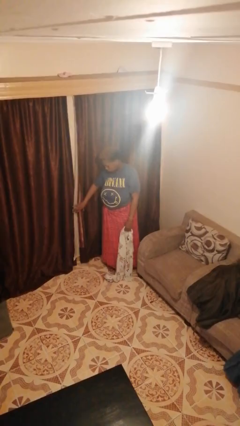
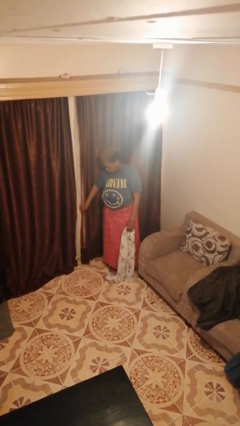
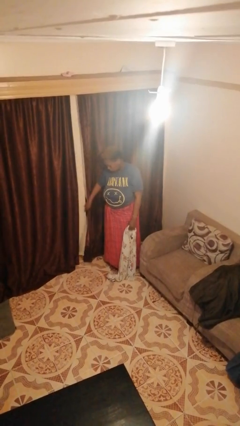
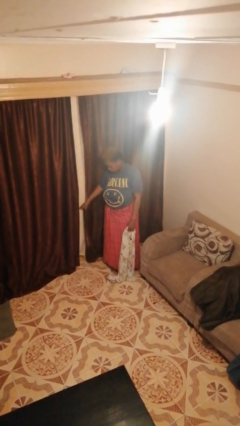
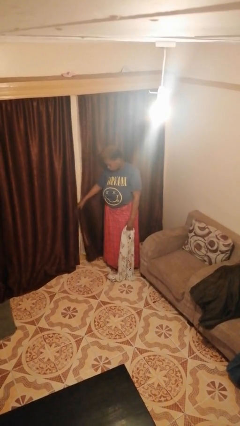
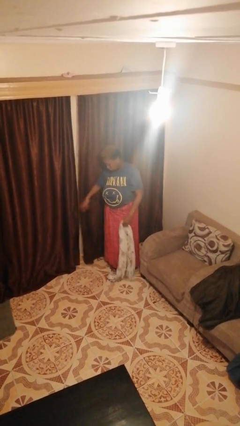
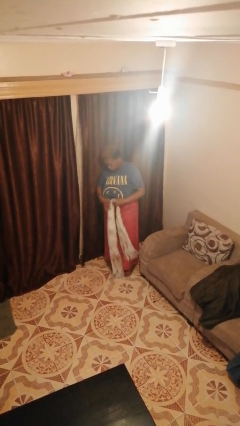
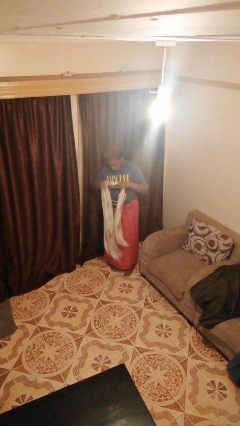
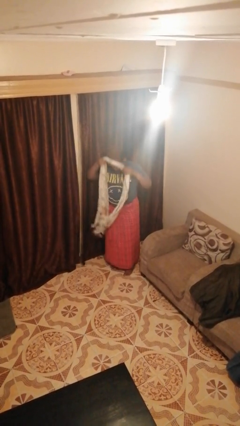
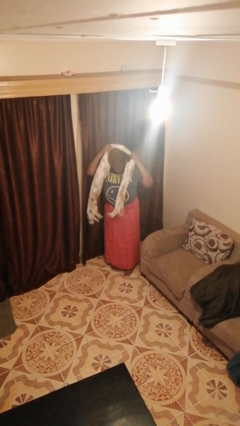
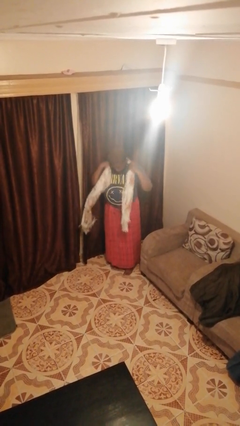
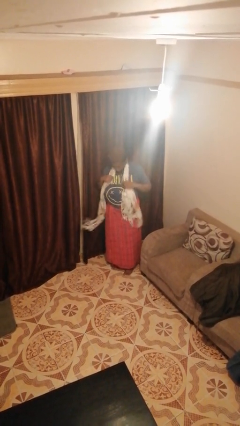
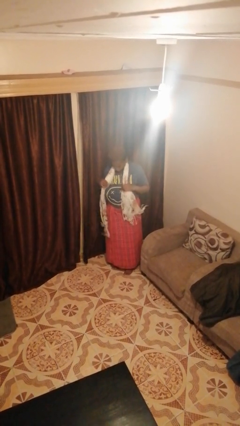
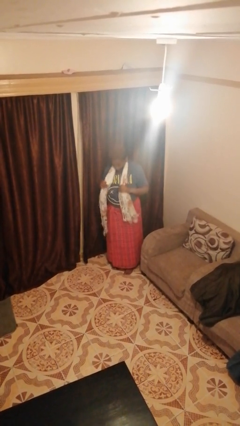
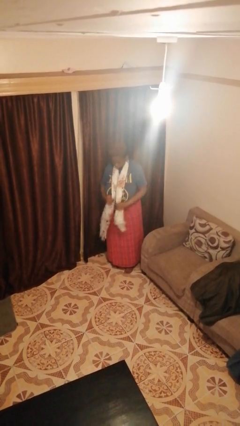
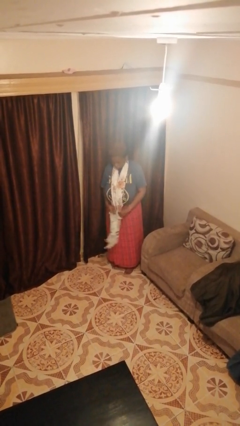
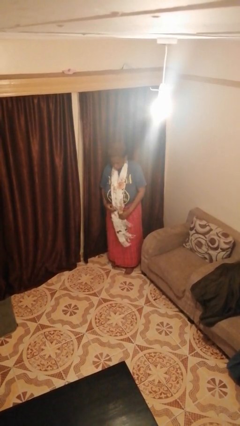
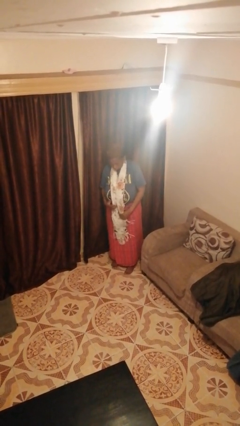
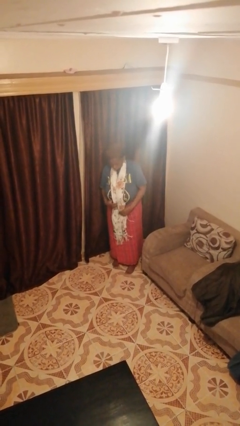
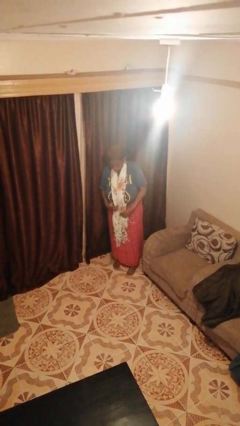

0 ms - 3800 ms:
person puts on scarf

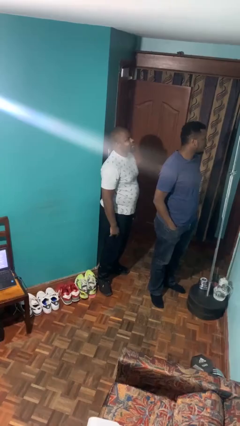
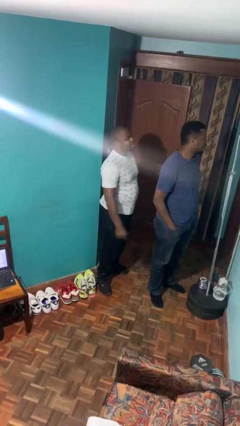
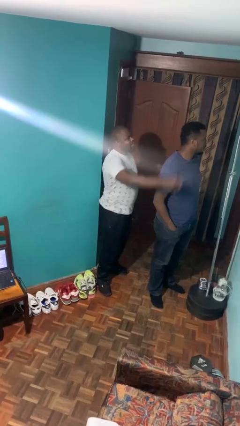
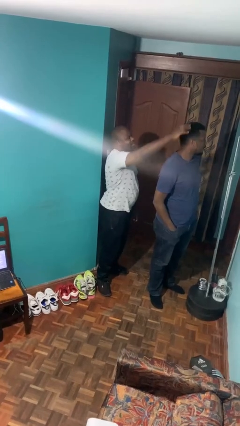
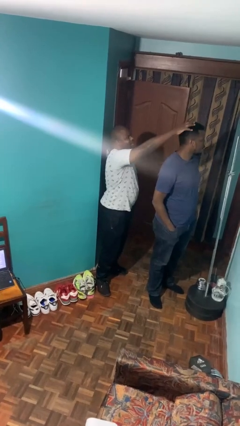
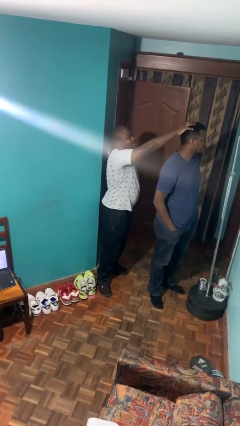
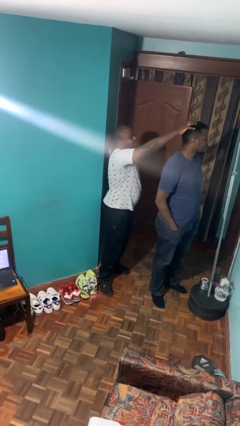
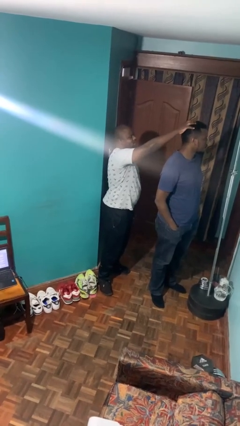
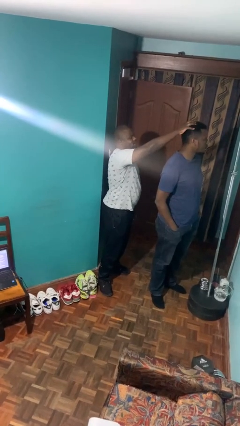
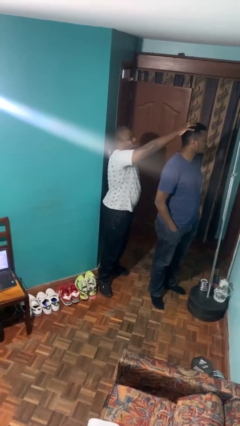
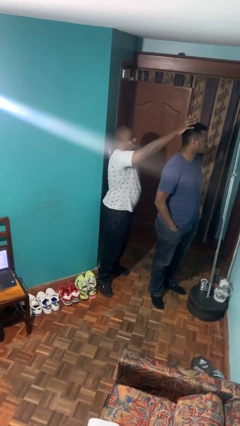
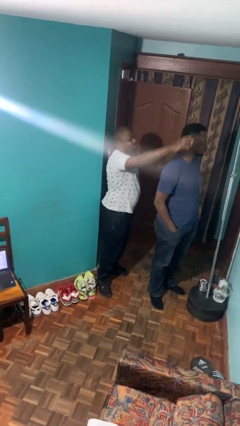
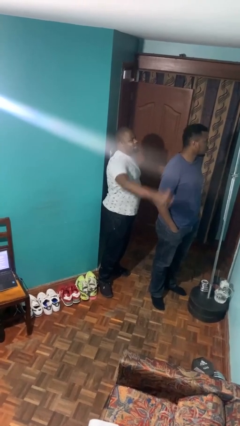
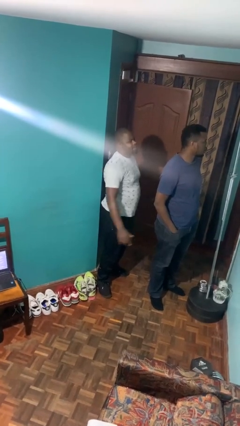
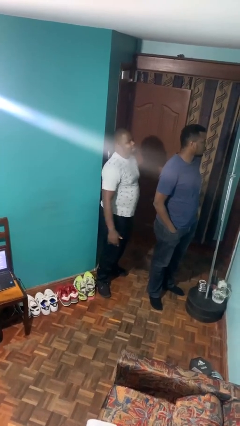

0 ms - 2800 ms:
person grabs person by hair

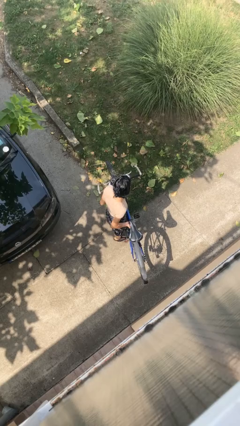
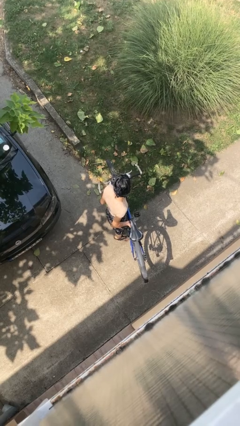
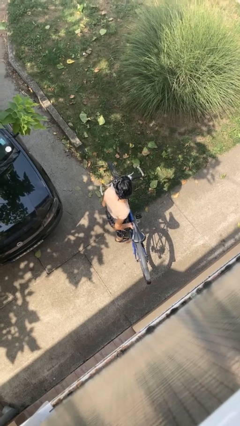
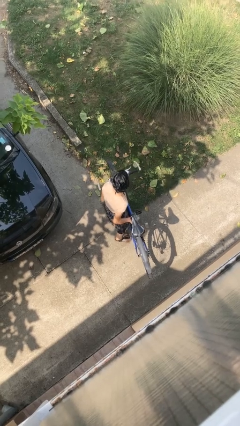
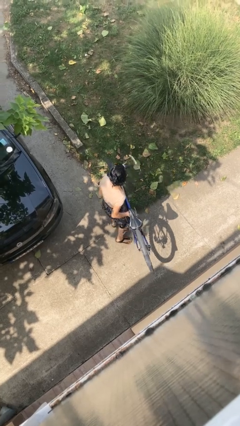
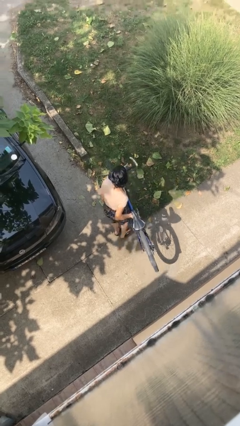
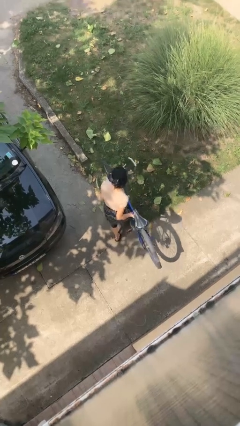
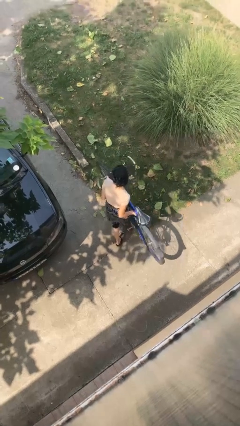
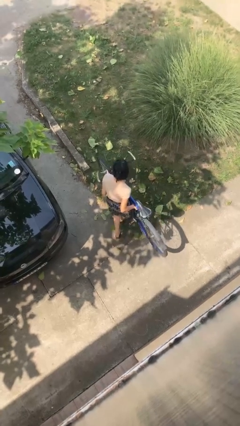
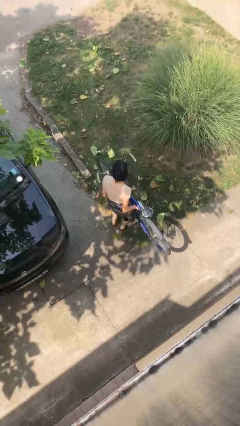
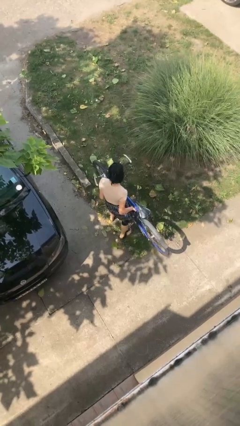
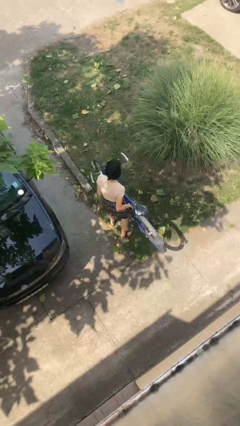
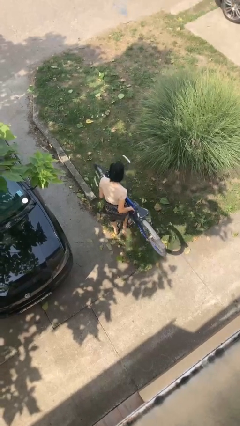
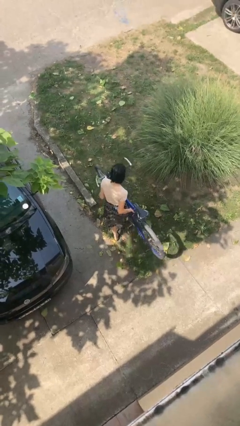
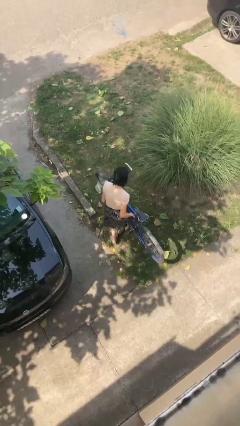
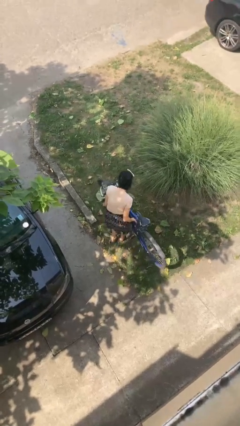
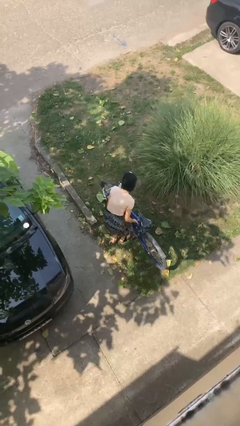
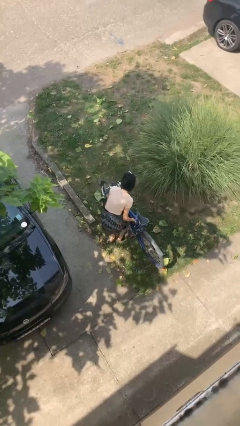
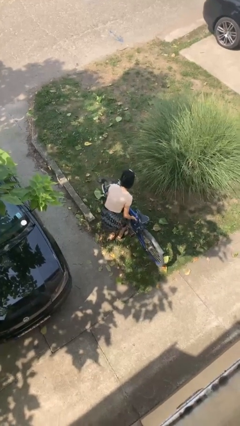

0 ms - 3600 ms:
person carries bicycle

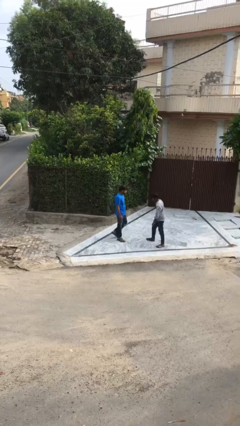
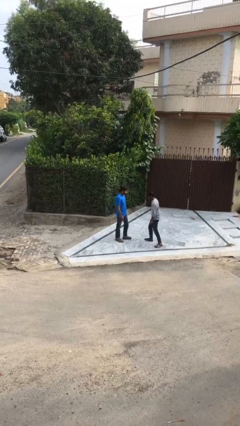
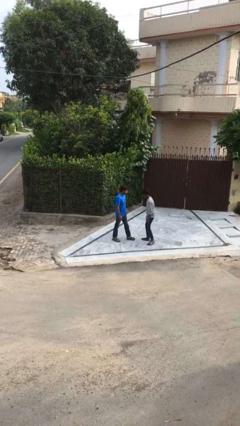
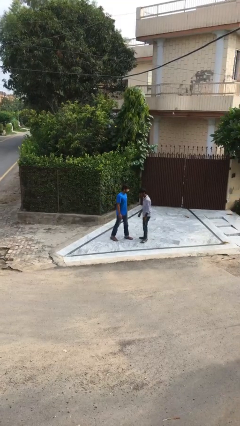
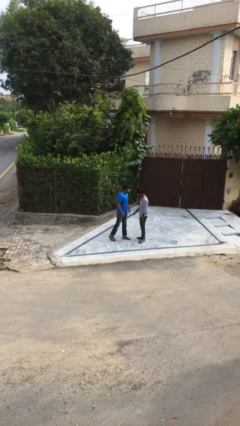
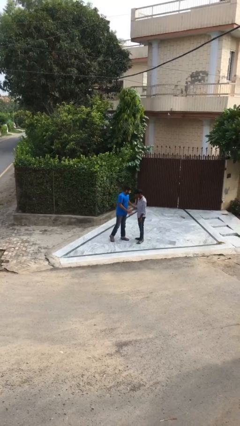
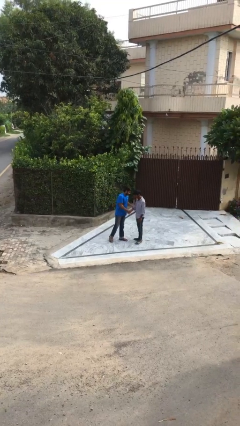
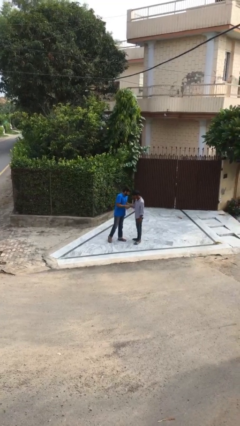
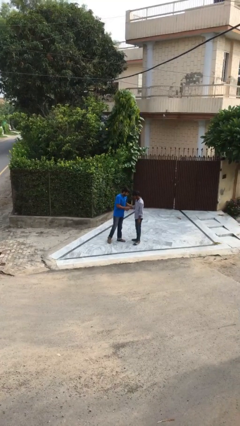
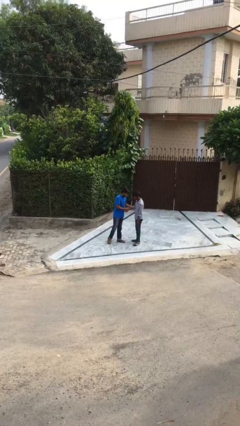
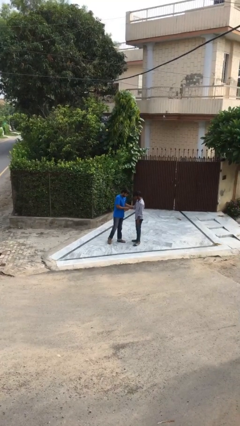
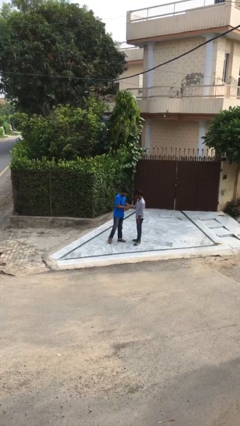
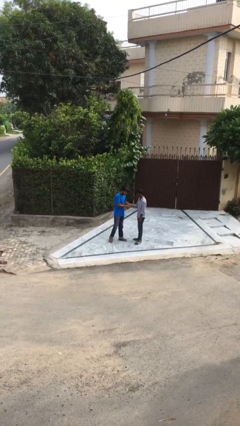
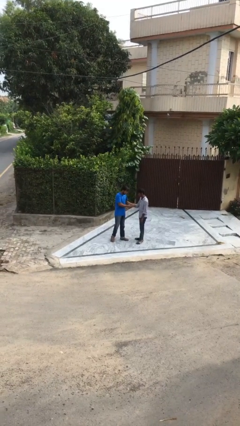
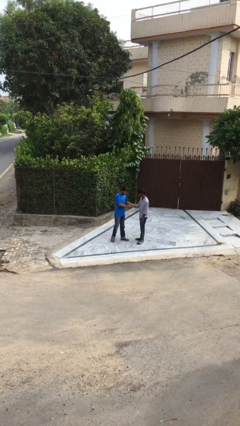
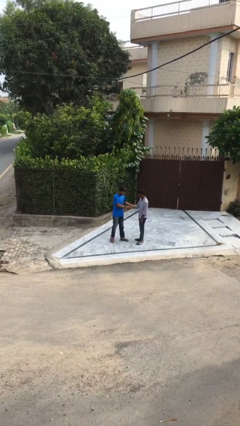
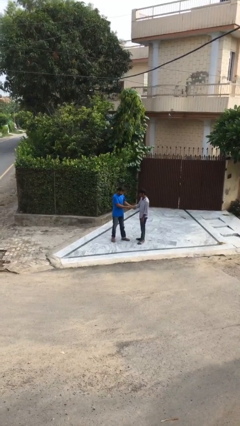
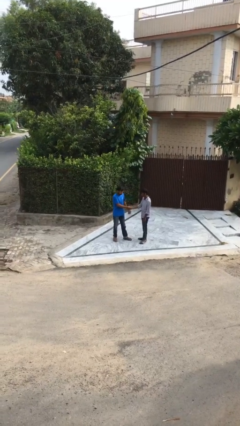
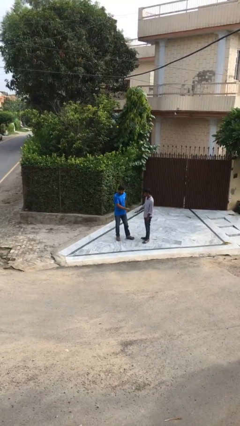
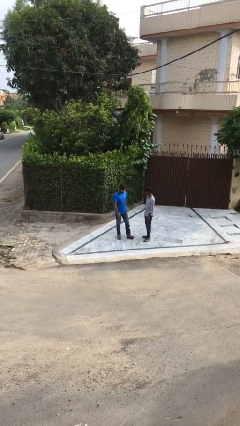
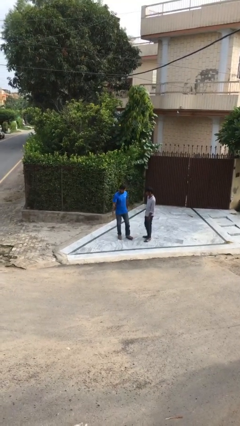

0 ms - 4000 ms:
person shakes hand

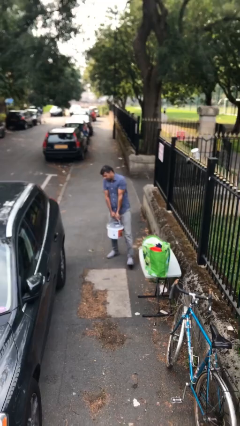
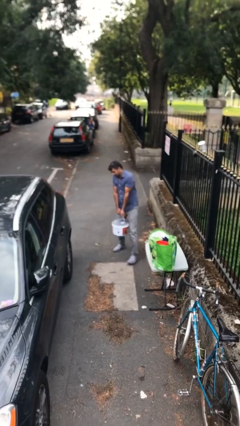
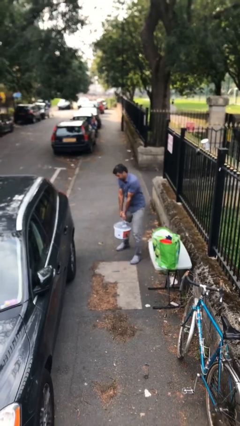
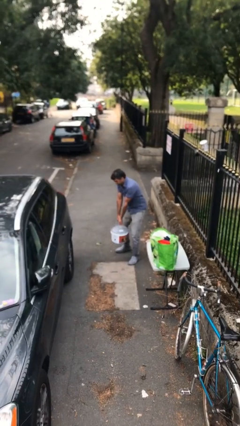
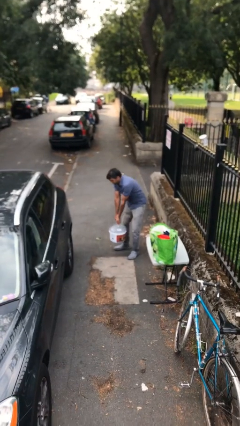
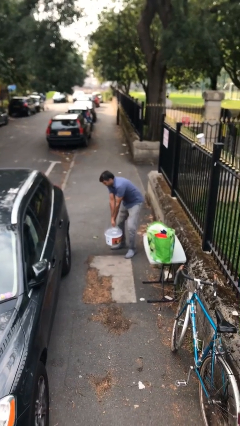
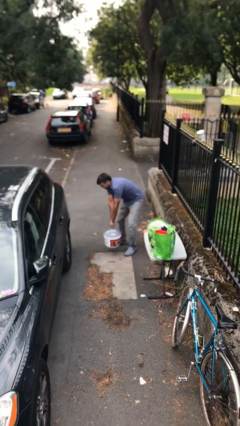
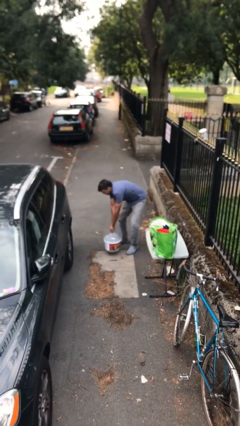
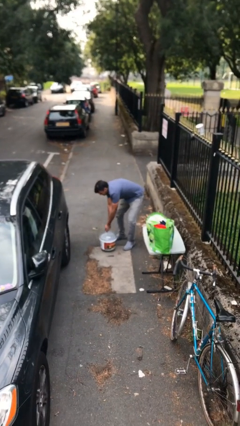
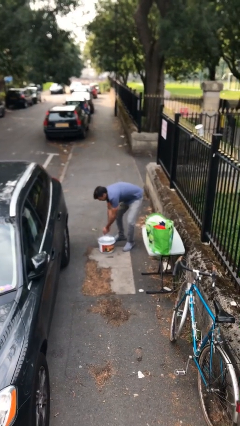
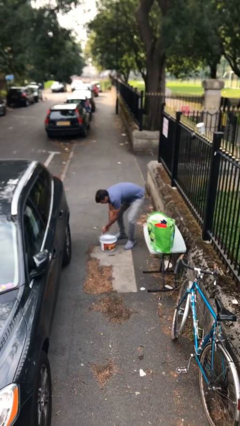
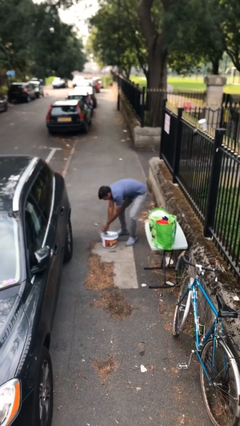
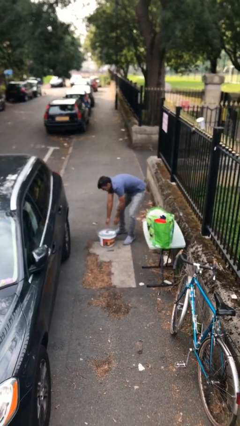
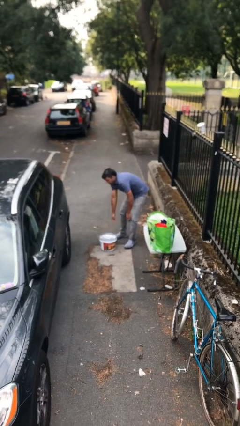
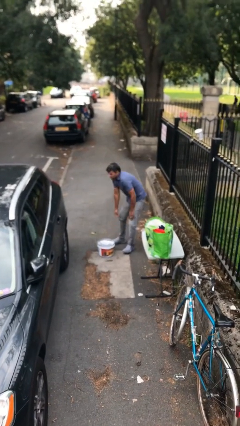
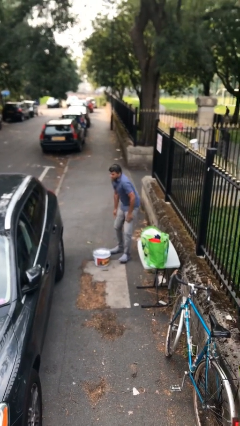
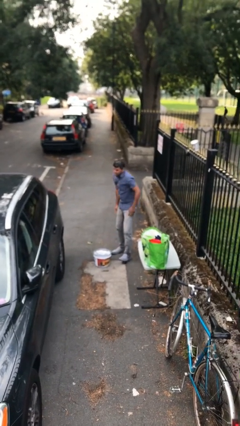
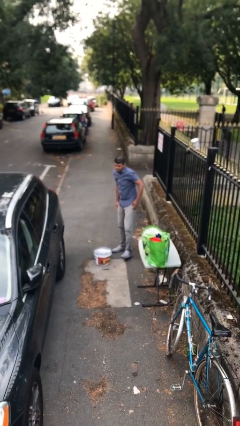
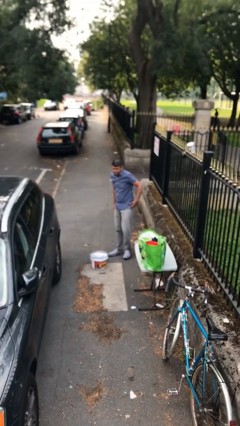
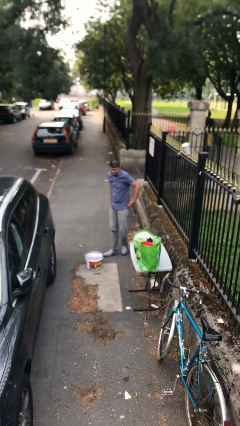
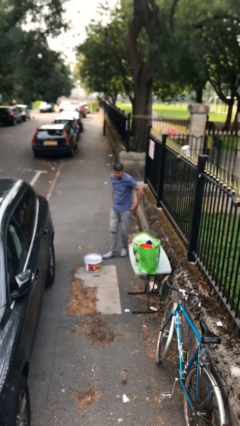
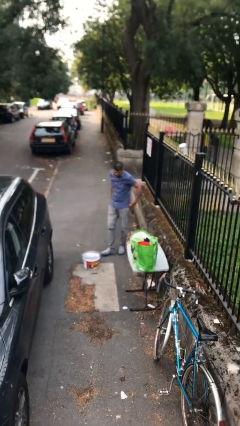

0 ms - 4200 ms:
person puts down object on floor
